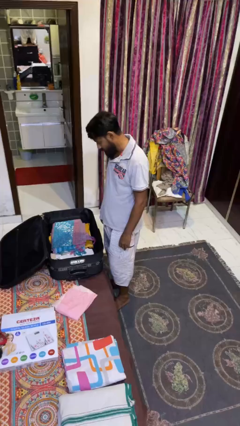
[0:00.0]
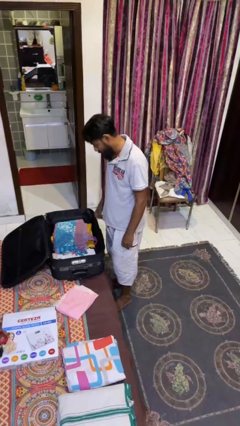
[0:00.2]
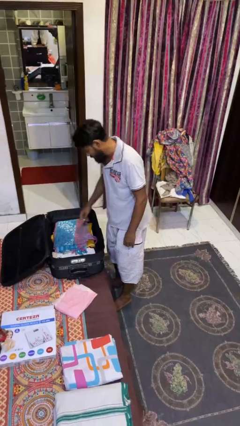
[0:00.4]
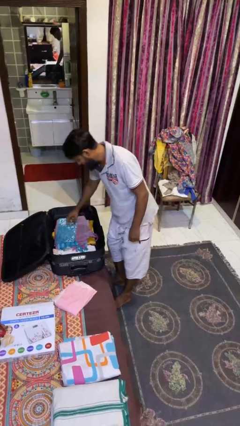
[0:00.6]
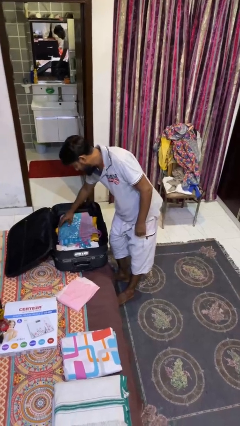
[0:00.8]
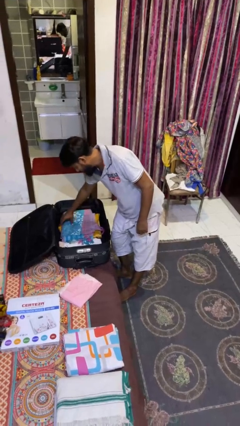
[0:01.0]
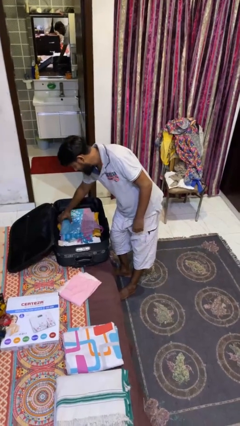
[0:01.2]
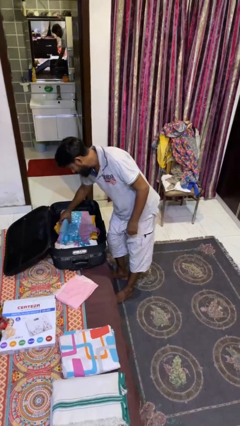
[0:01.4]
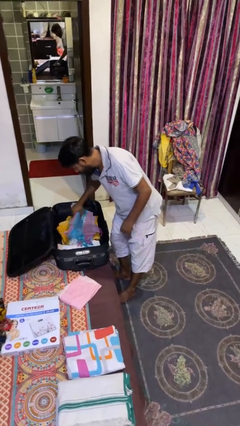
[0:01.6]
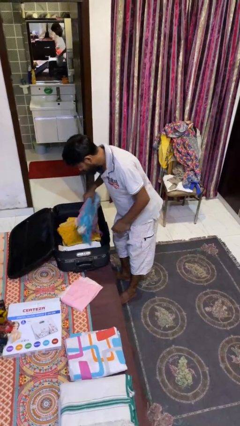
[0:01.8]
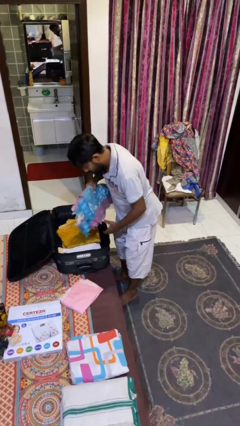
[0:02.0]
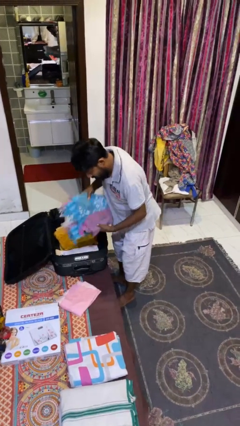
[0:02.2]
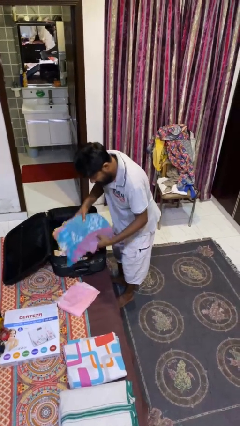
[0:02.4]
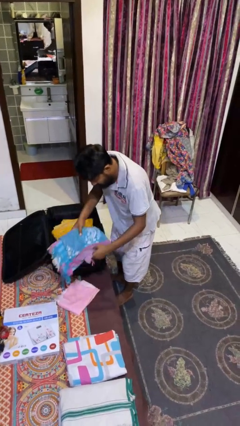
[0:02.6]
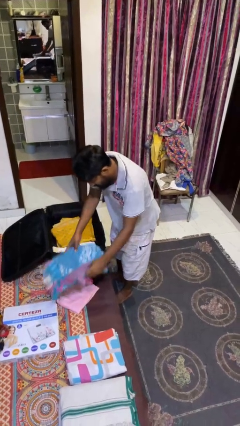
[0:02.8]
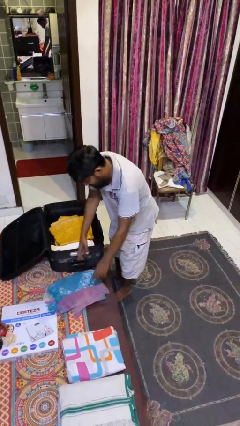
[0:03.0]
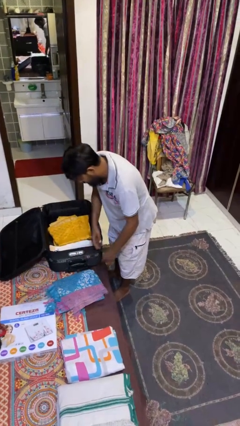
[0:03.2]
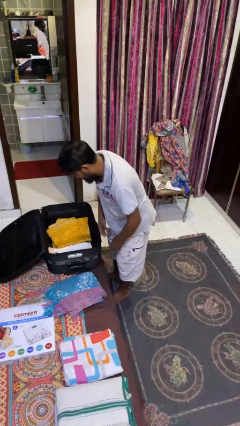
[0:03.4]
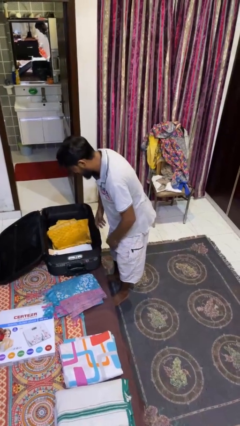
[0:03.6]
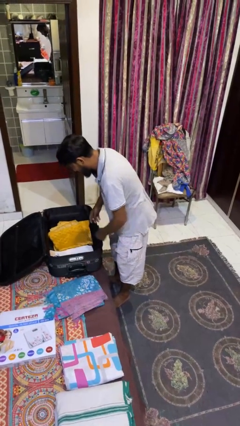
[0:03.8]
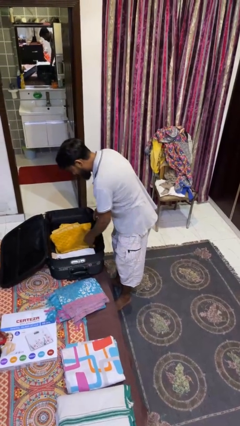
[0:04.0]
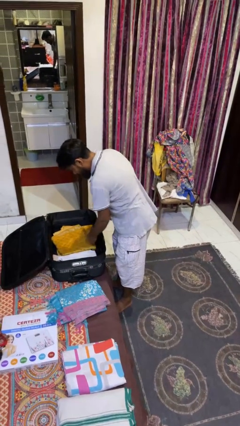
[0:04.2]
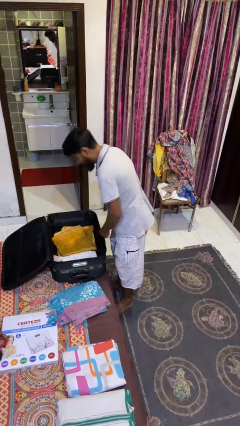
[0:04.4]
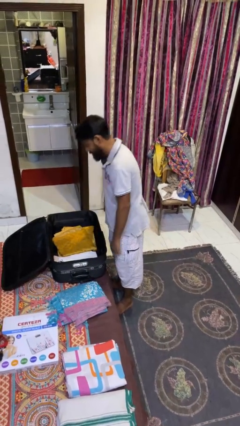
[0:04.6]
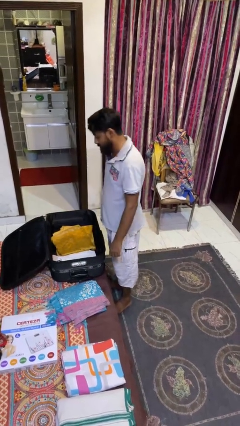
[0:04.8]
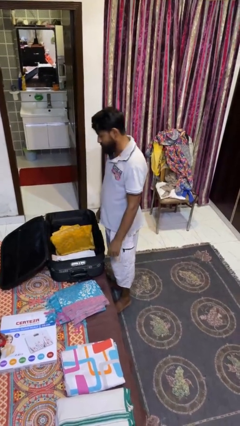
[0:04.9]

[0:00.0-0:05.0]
person unloads clothes from suitcase

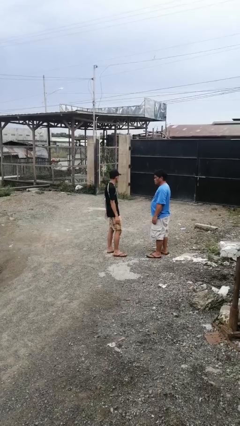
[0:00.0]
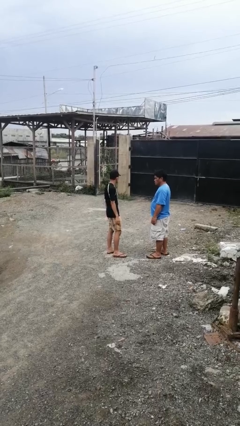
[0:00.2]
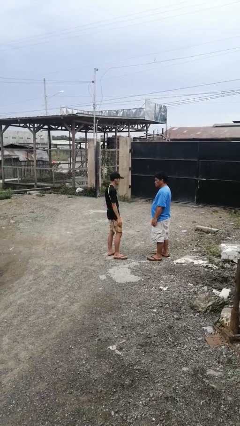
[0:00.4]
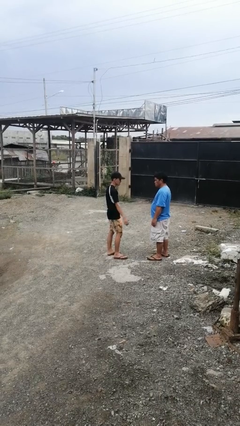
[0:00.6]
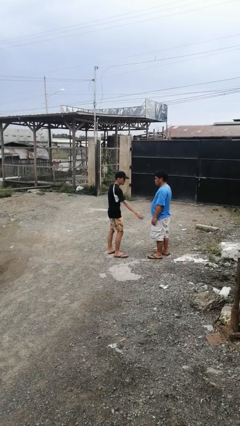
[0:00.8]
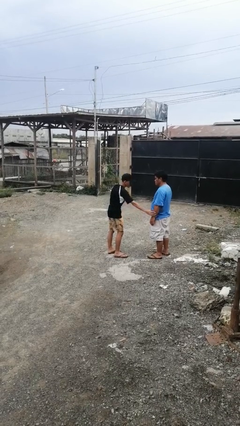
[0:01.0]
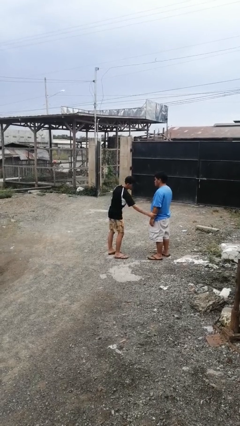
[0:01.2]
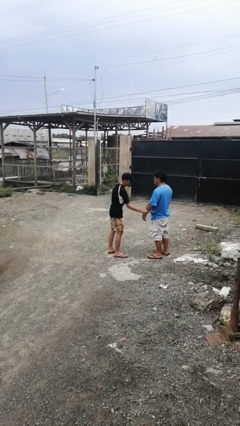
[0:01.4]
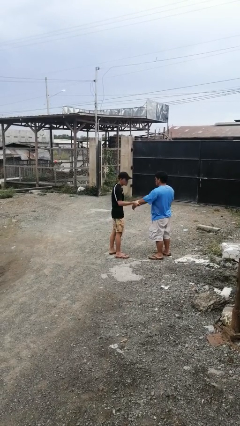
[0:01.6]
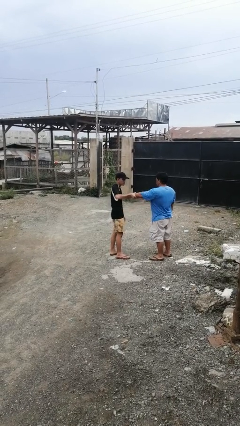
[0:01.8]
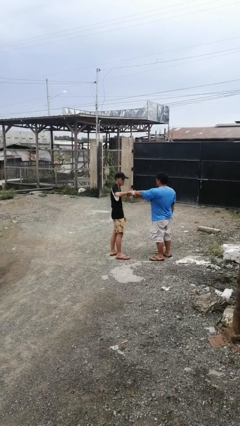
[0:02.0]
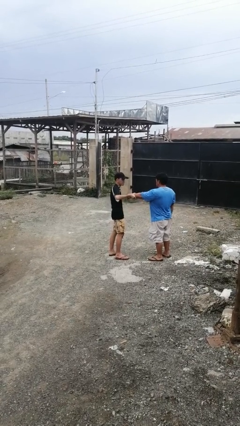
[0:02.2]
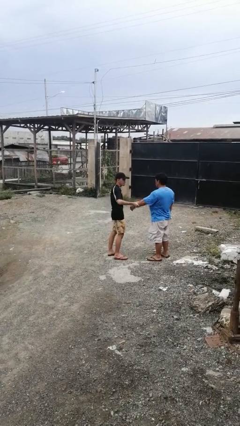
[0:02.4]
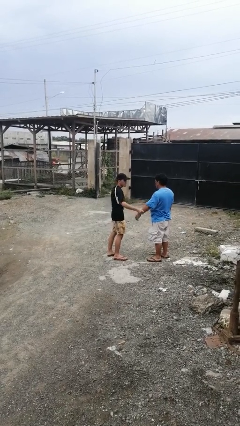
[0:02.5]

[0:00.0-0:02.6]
person grabs person by forearm

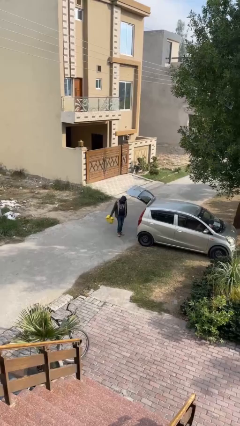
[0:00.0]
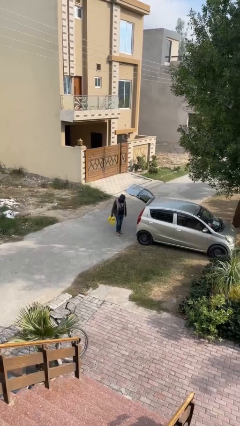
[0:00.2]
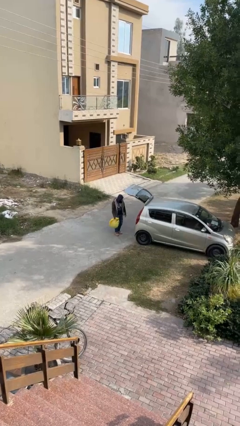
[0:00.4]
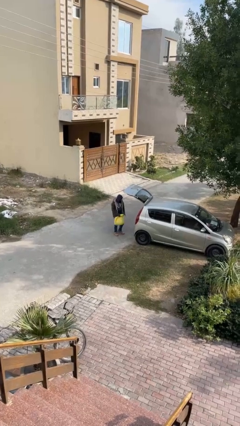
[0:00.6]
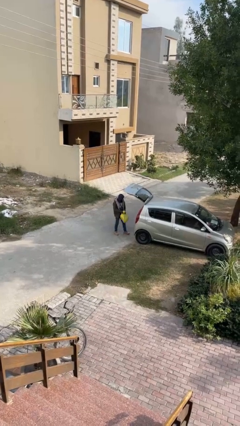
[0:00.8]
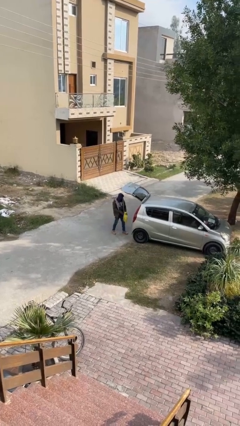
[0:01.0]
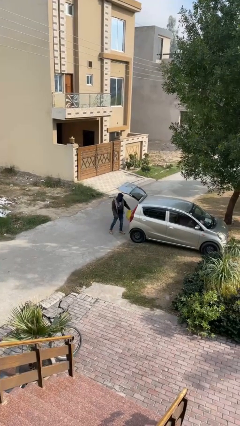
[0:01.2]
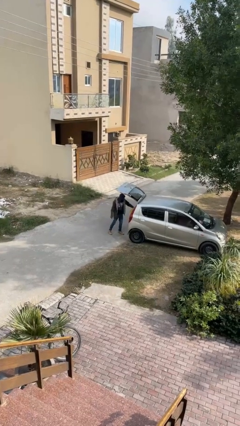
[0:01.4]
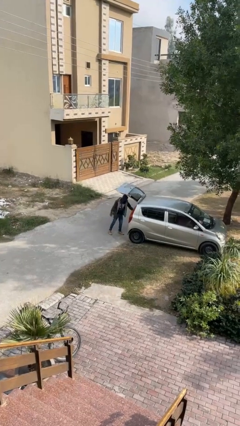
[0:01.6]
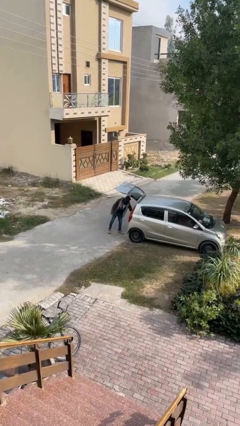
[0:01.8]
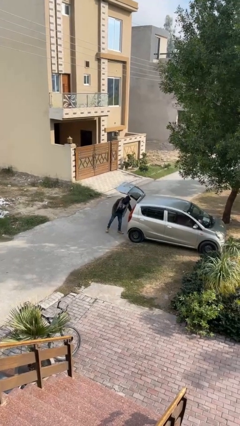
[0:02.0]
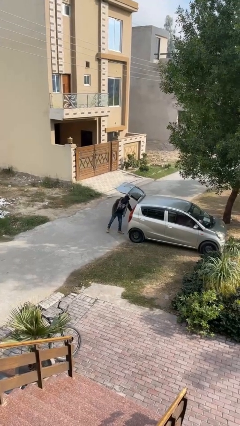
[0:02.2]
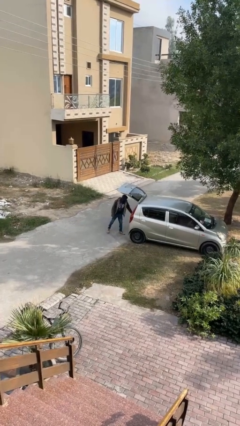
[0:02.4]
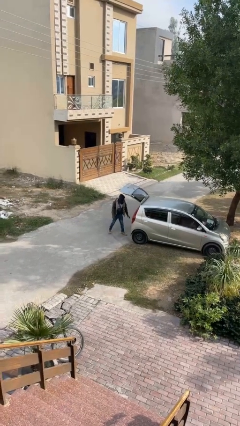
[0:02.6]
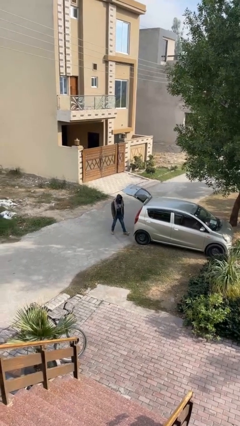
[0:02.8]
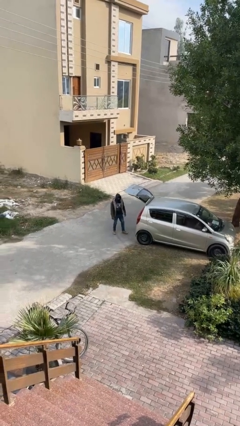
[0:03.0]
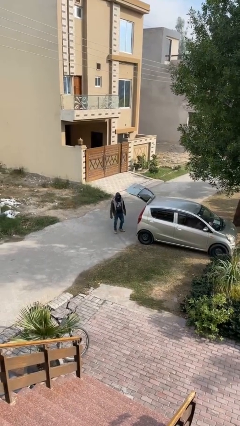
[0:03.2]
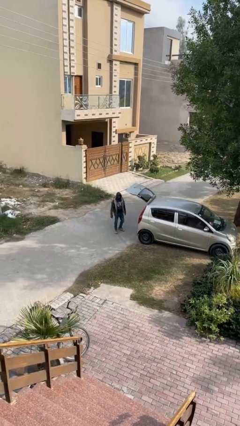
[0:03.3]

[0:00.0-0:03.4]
person loads car

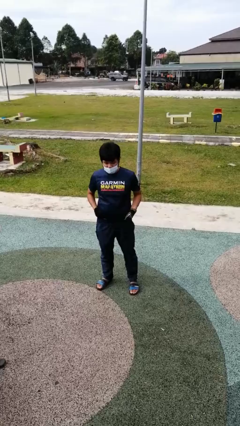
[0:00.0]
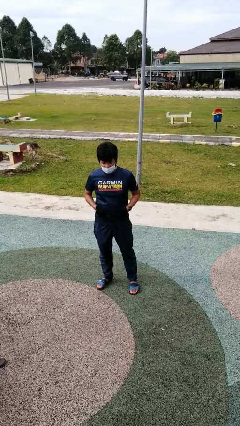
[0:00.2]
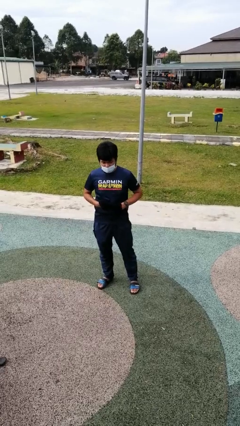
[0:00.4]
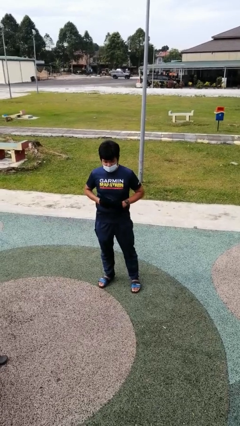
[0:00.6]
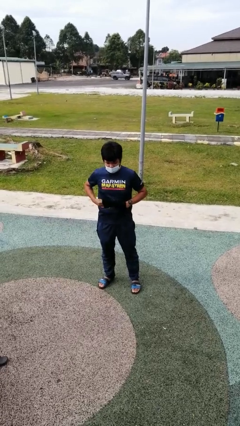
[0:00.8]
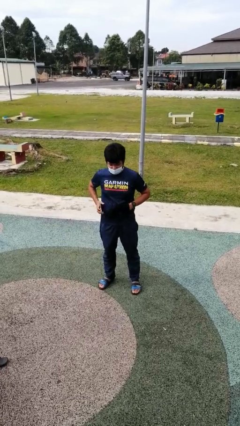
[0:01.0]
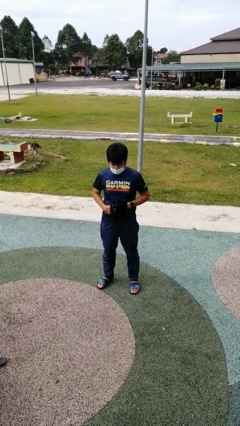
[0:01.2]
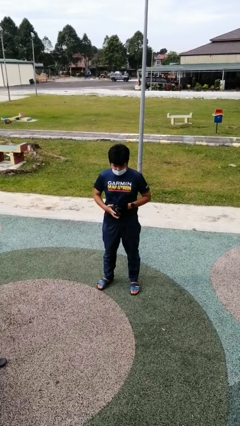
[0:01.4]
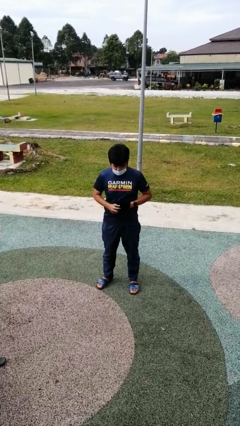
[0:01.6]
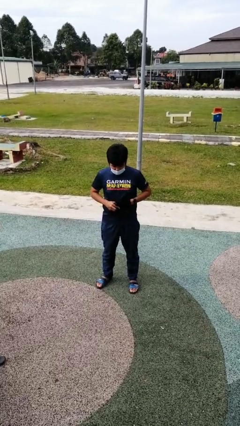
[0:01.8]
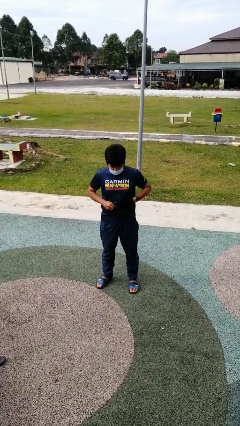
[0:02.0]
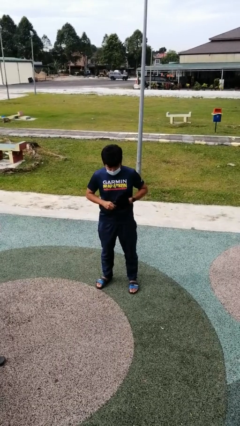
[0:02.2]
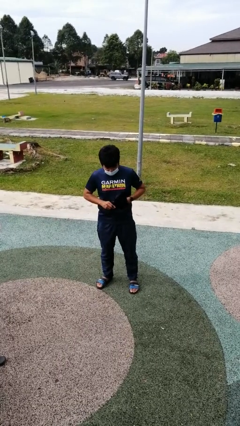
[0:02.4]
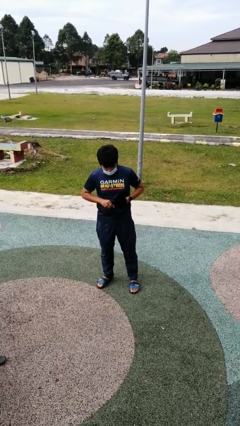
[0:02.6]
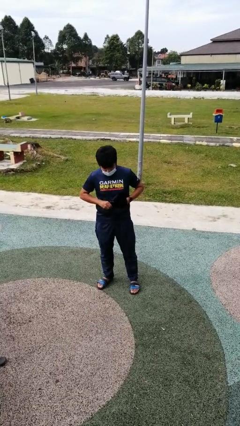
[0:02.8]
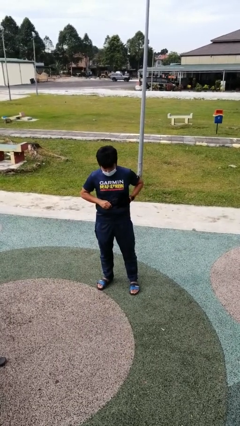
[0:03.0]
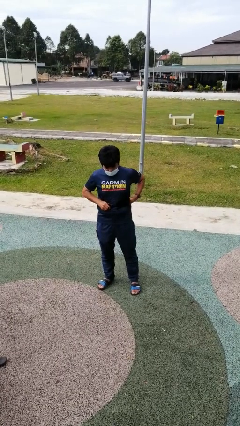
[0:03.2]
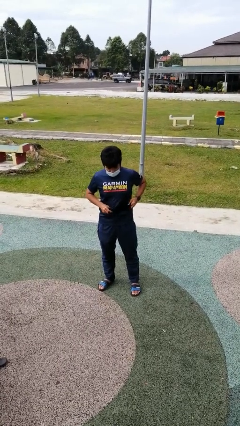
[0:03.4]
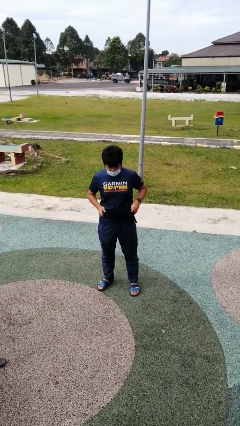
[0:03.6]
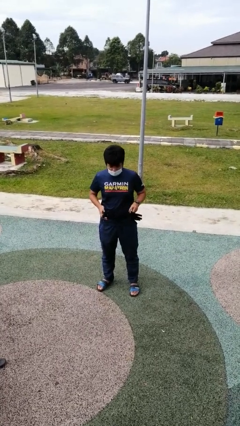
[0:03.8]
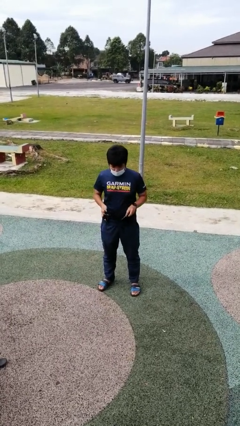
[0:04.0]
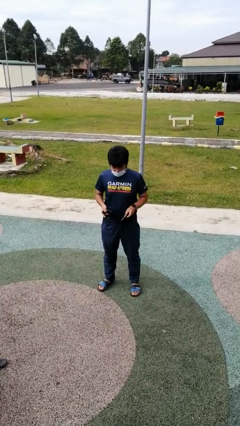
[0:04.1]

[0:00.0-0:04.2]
person takes off gloves

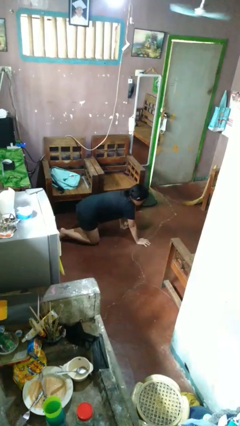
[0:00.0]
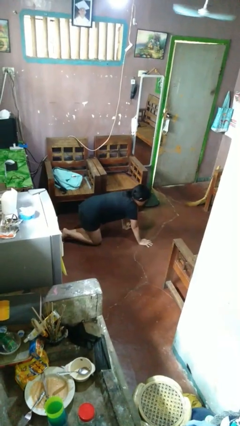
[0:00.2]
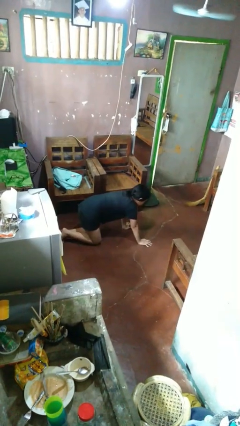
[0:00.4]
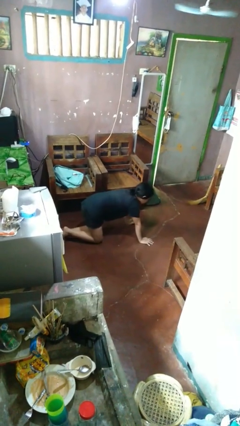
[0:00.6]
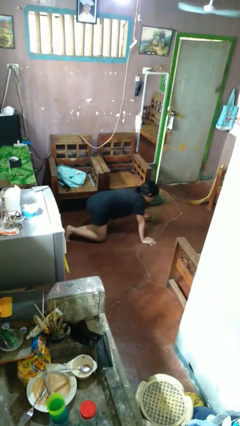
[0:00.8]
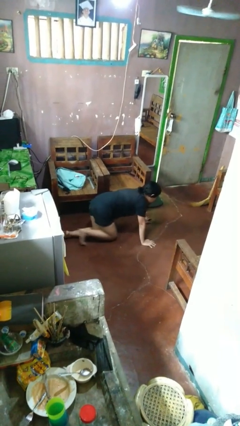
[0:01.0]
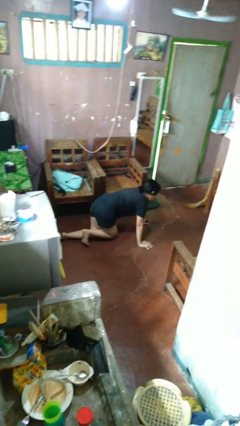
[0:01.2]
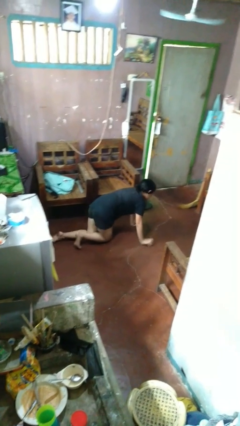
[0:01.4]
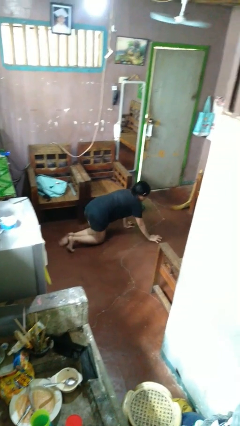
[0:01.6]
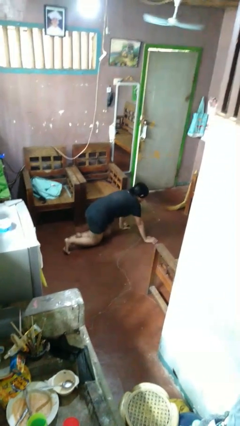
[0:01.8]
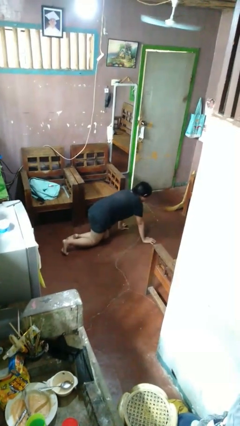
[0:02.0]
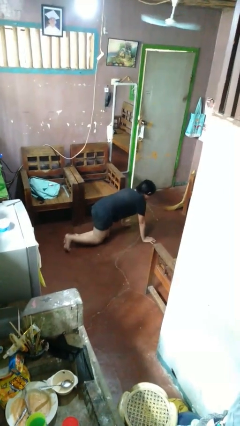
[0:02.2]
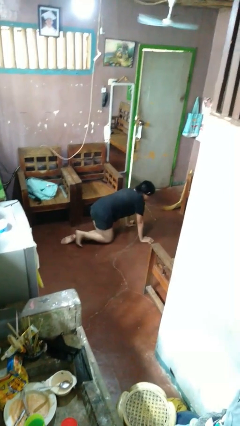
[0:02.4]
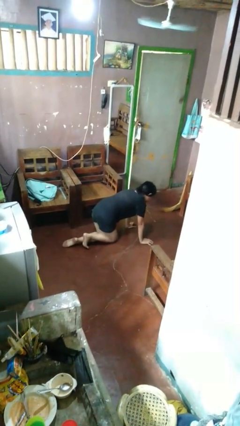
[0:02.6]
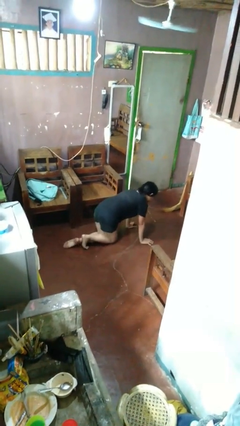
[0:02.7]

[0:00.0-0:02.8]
person crawls
